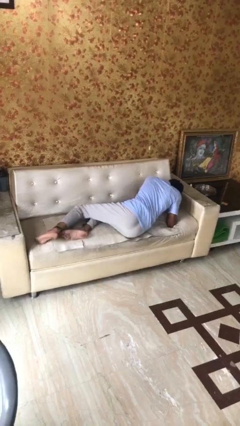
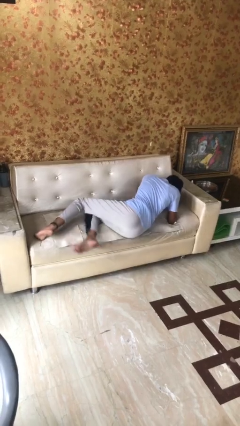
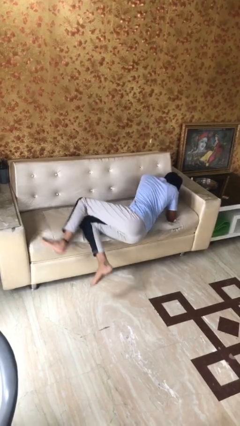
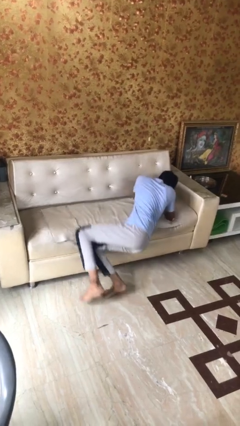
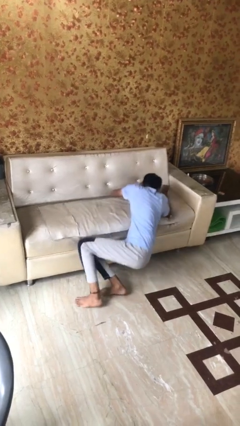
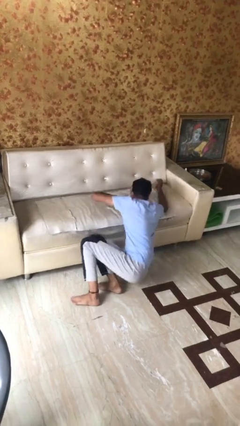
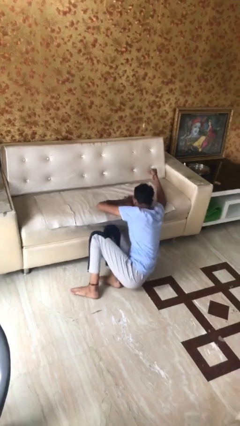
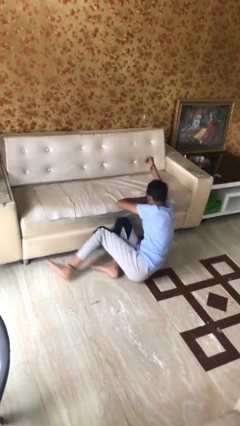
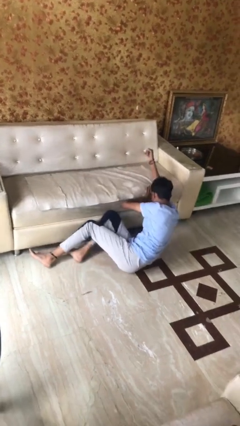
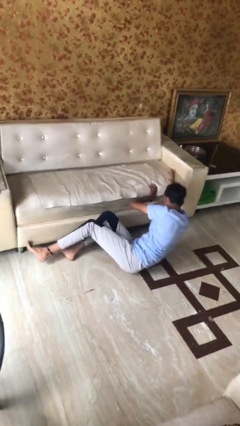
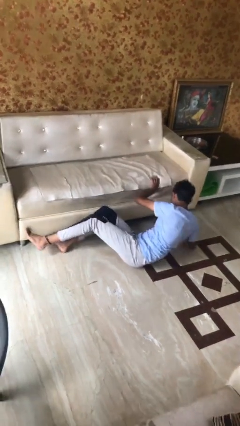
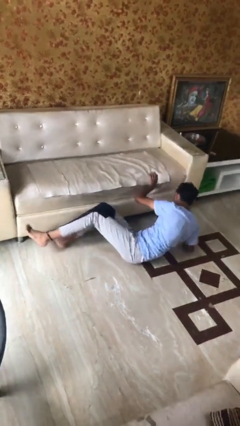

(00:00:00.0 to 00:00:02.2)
person falls from bed

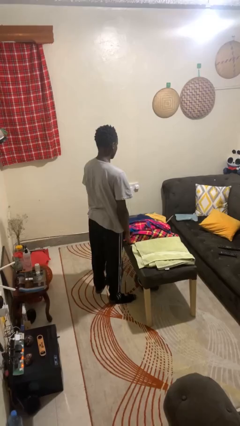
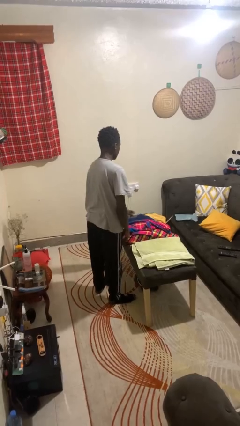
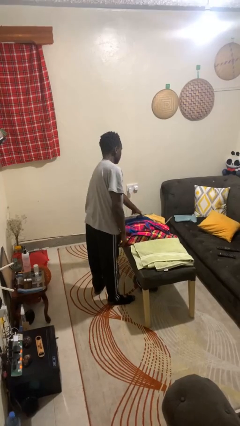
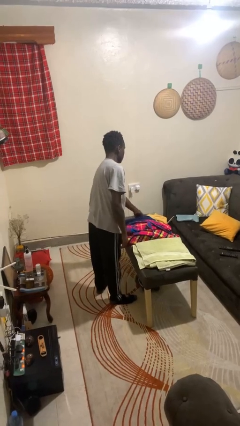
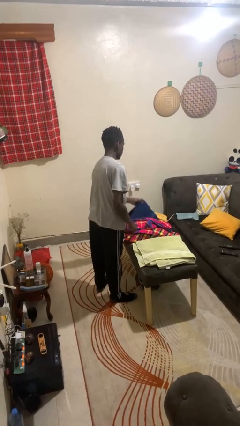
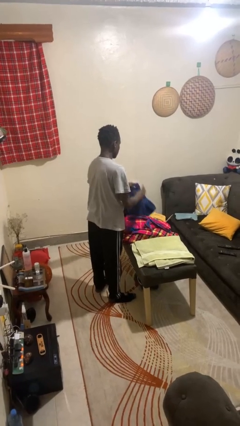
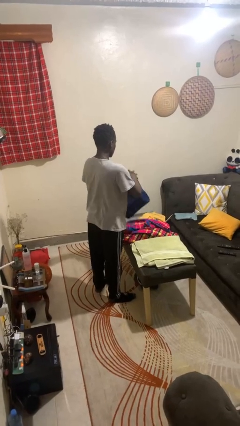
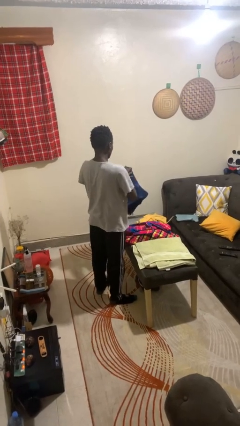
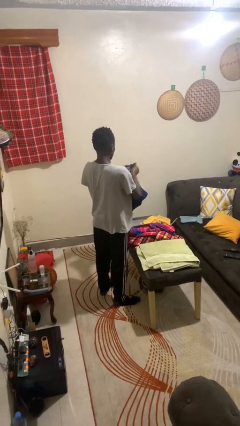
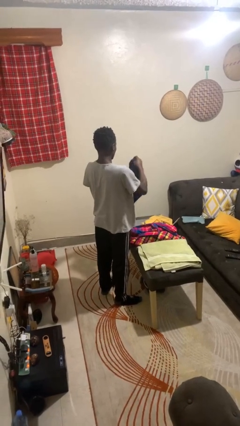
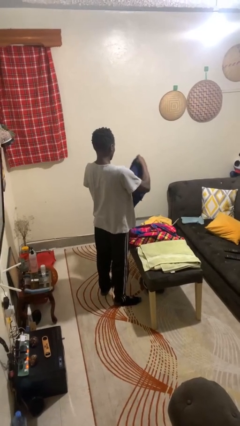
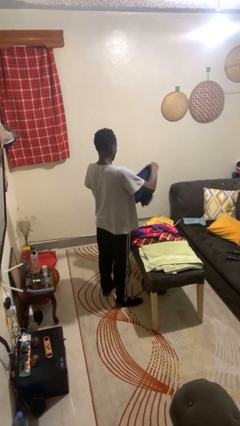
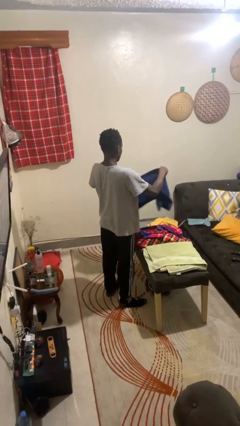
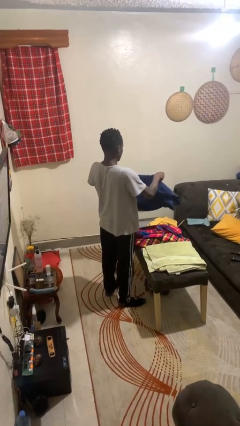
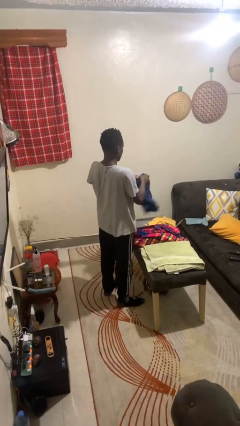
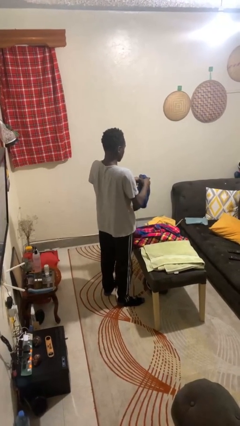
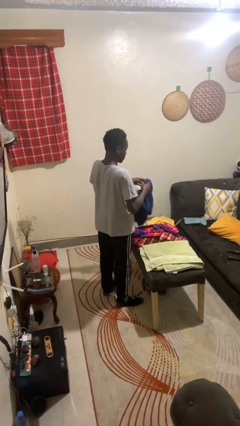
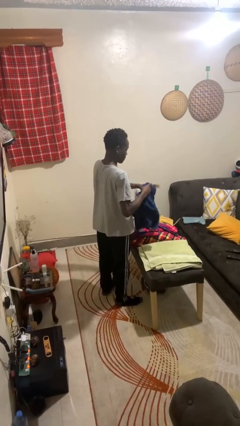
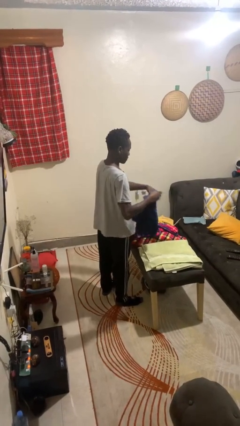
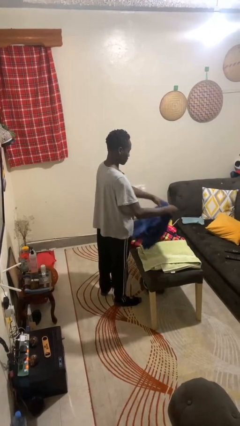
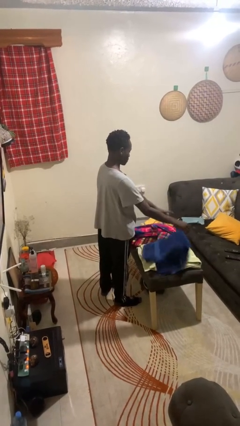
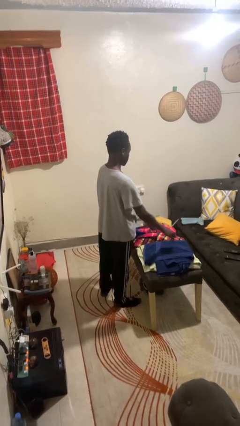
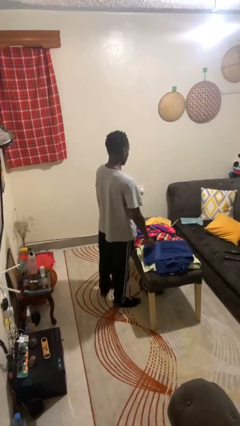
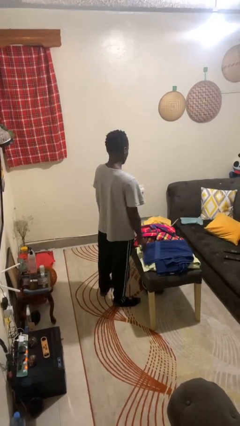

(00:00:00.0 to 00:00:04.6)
person folds towel

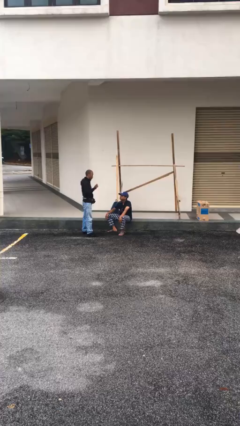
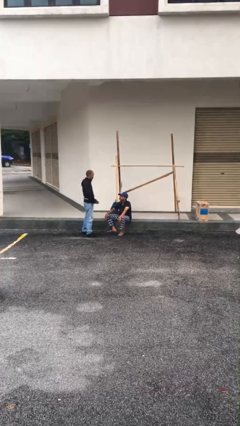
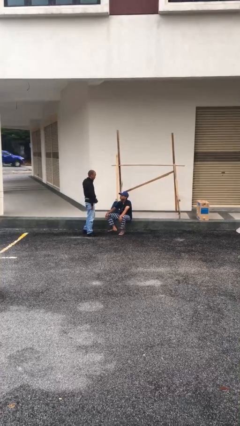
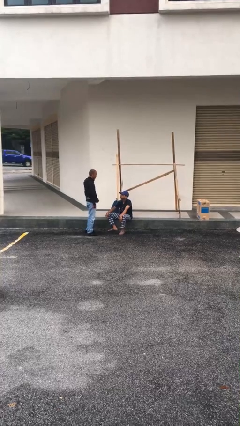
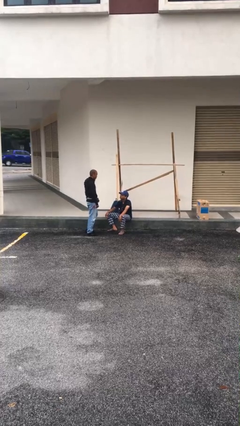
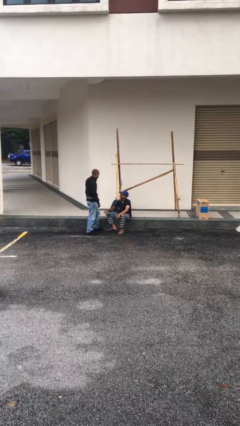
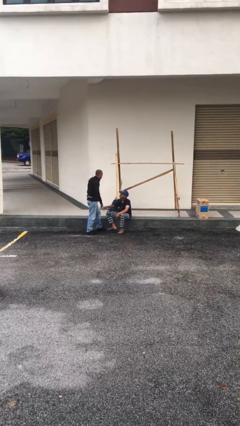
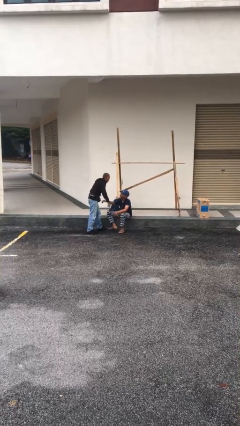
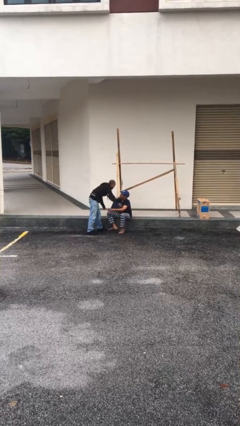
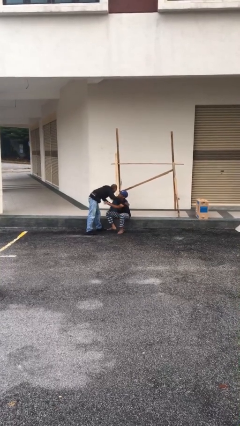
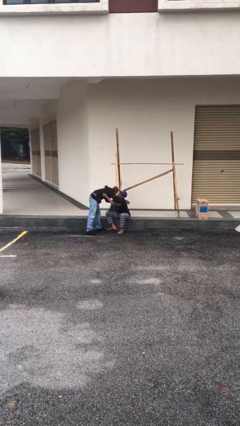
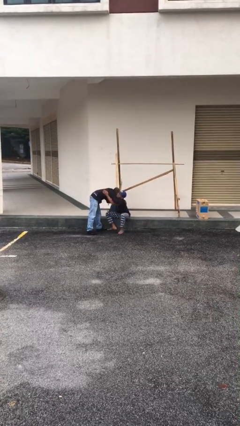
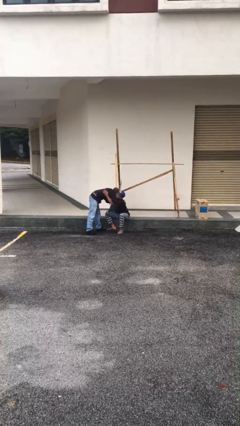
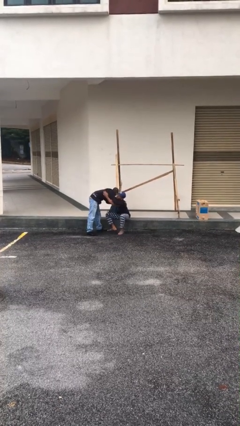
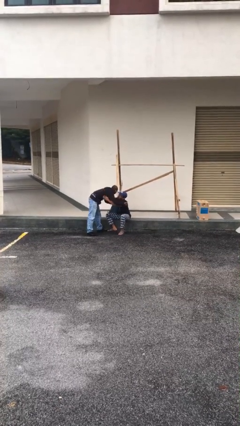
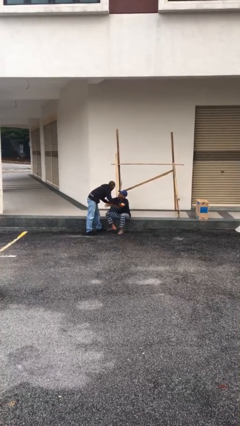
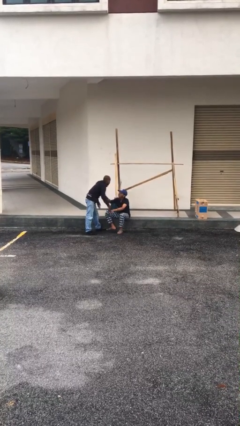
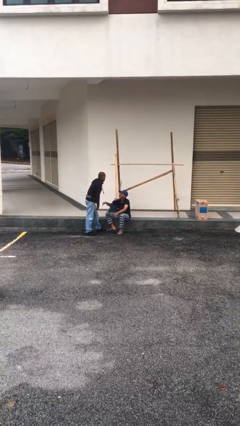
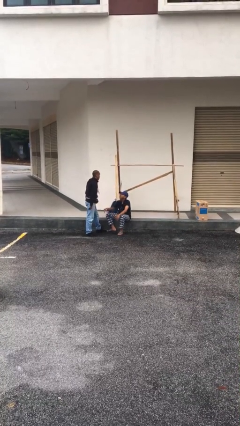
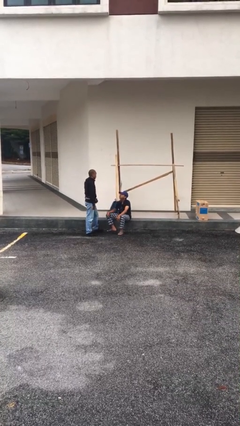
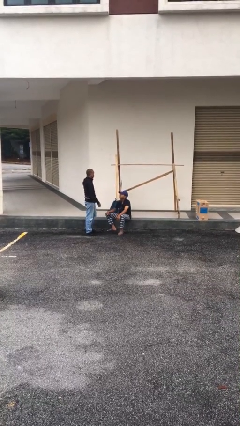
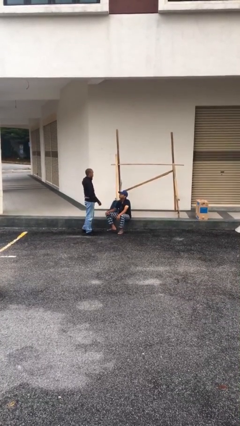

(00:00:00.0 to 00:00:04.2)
person embraces person

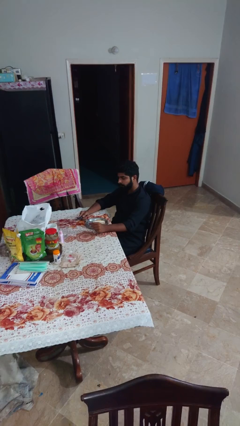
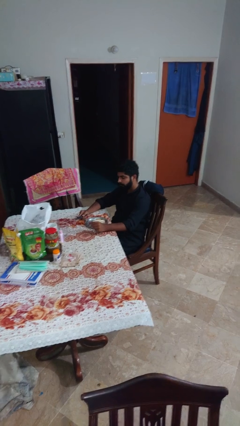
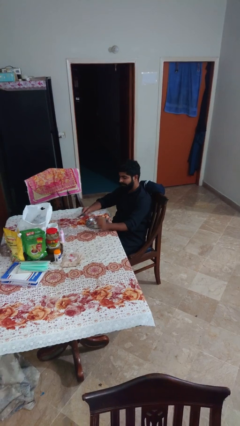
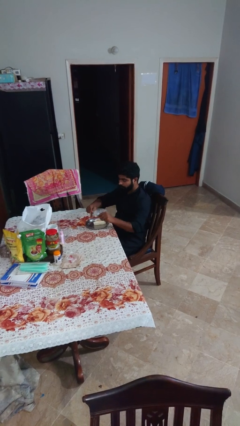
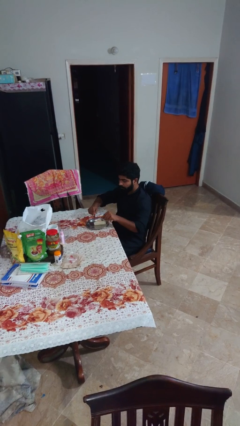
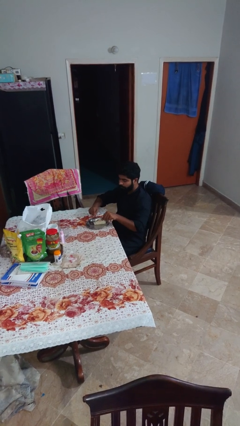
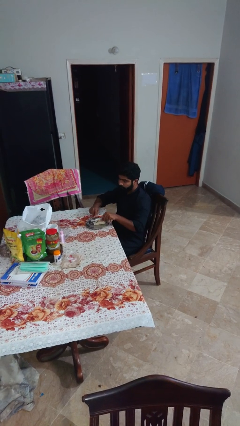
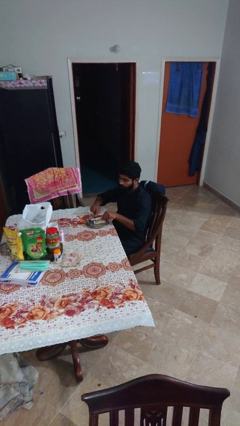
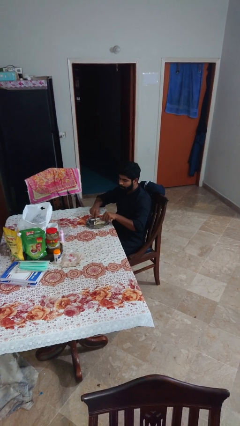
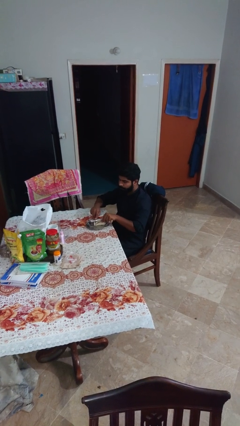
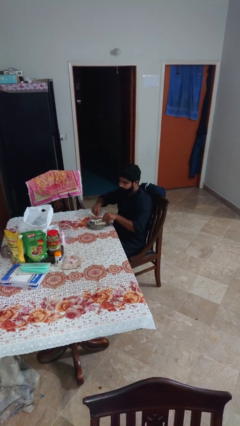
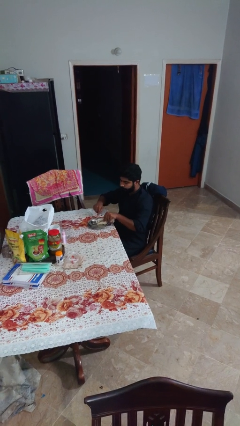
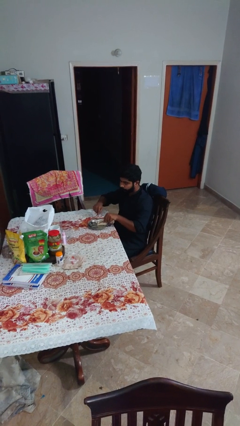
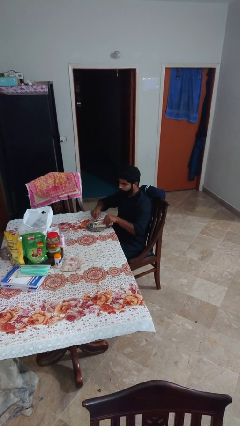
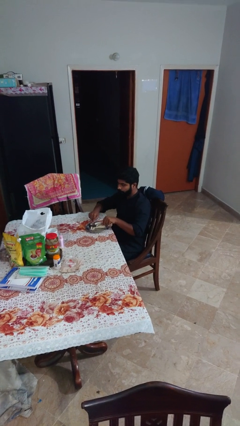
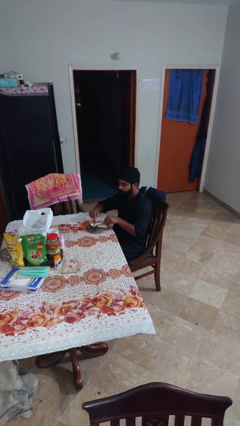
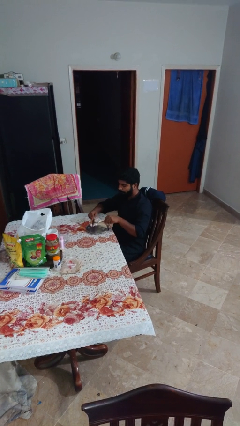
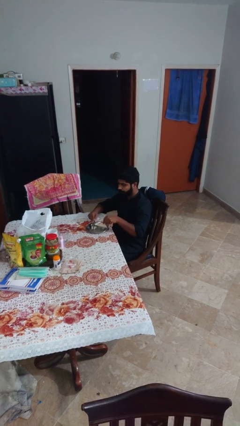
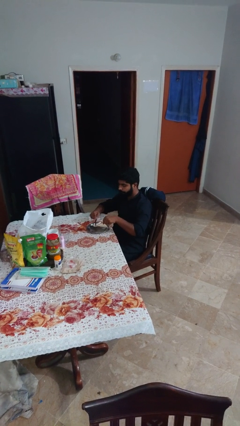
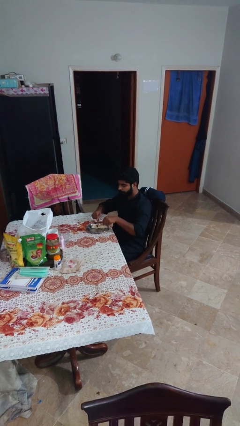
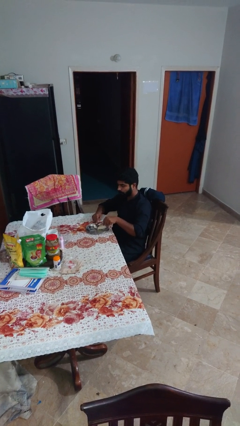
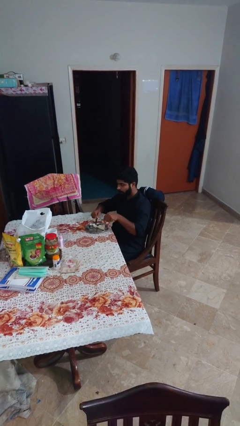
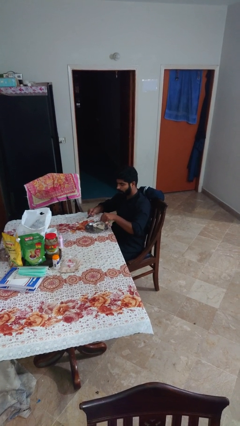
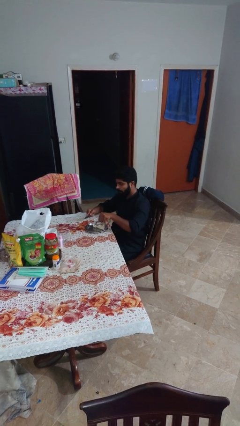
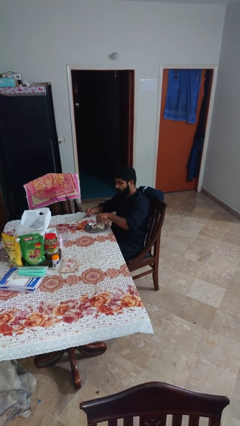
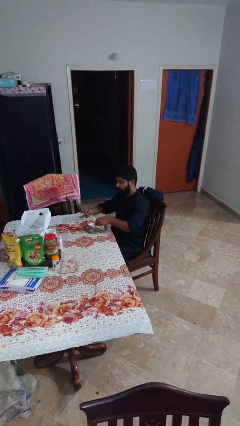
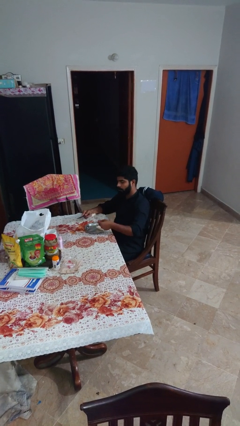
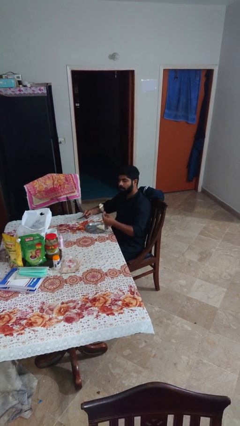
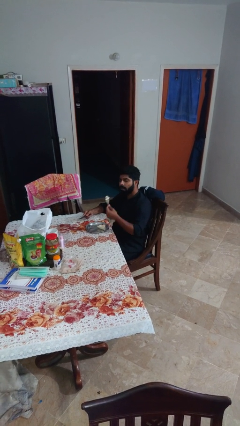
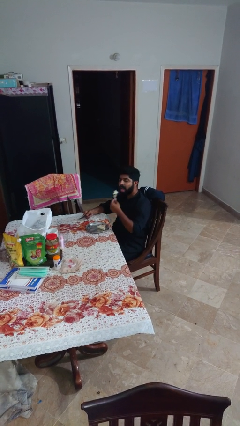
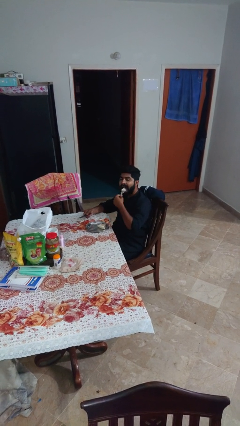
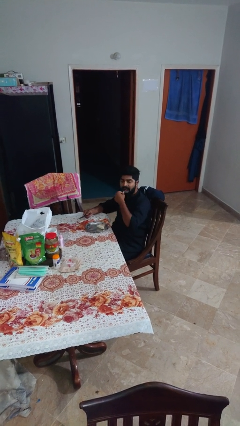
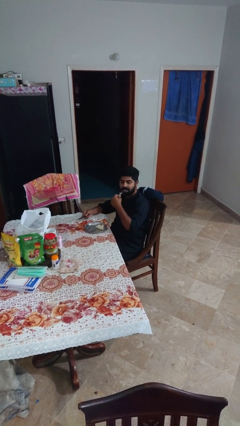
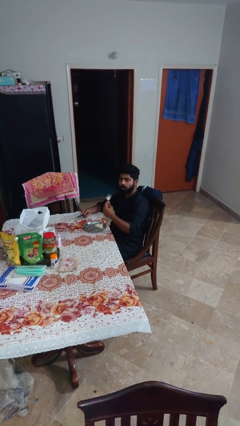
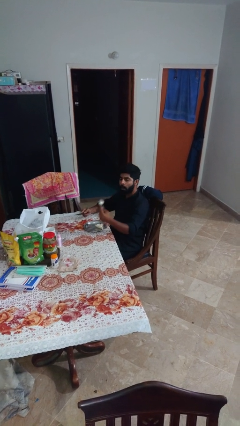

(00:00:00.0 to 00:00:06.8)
person eats with utensil
